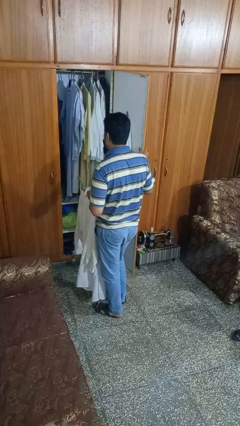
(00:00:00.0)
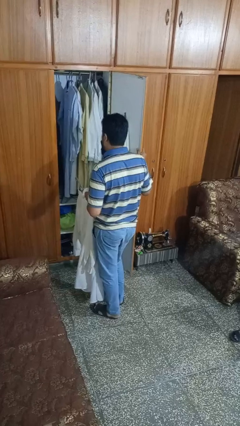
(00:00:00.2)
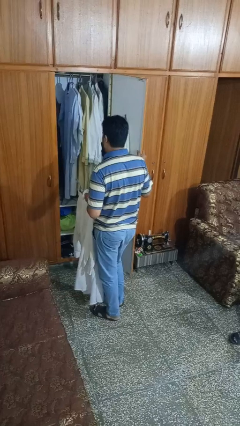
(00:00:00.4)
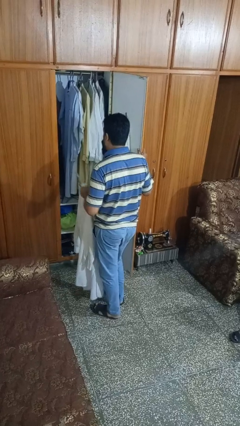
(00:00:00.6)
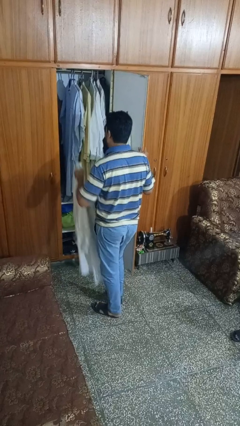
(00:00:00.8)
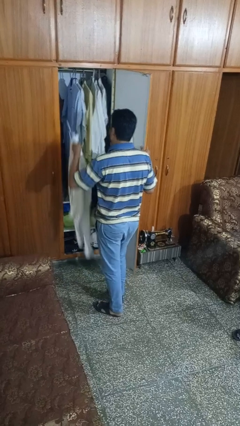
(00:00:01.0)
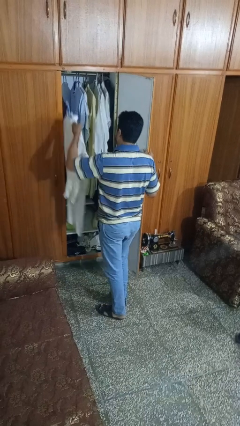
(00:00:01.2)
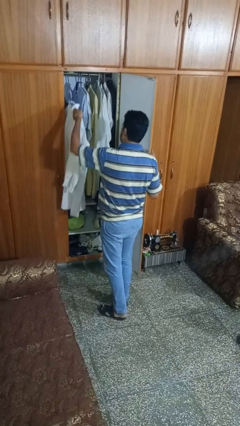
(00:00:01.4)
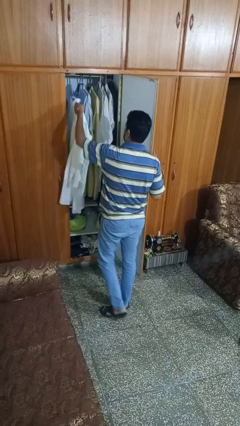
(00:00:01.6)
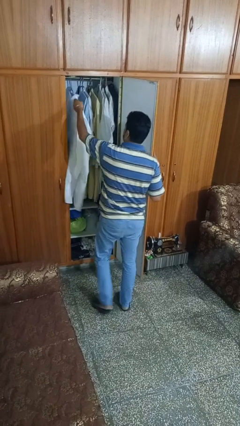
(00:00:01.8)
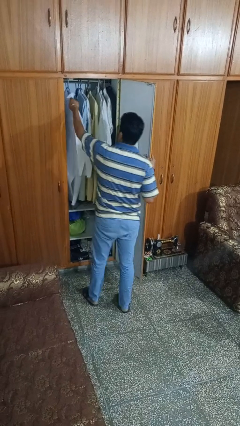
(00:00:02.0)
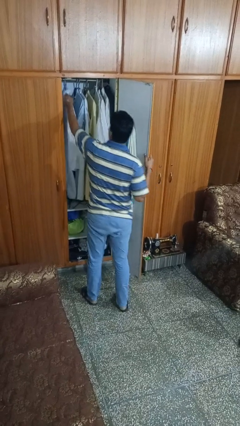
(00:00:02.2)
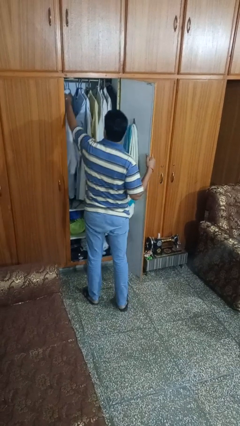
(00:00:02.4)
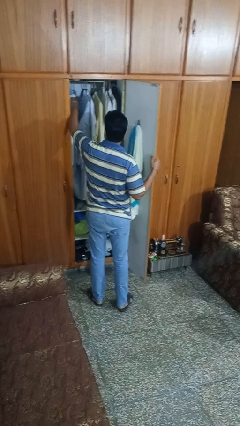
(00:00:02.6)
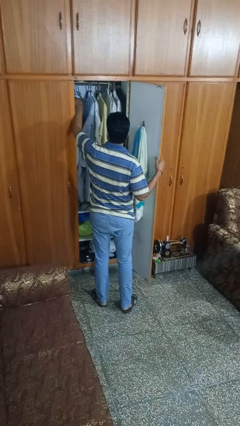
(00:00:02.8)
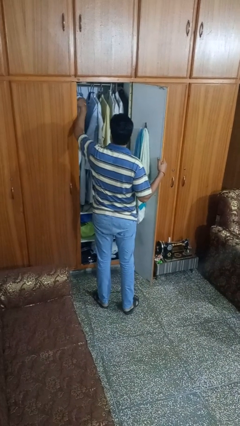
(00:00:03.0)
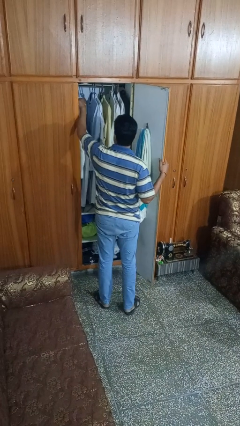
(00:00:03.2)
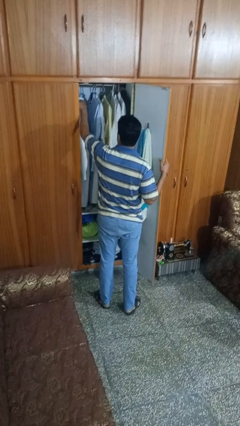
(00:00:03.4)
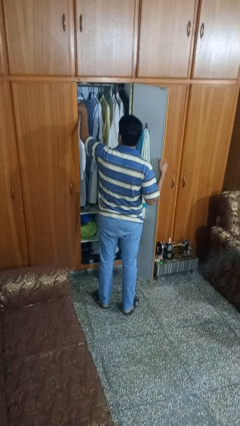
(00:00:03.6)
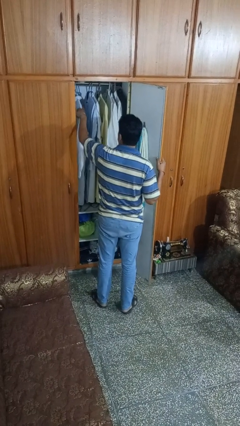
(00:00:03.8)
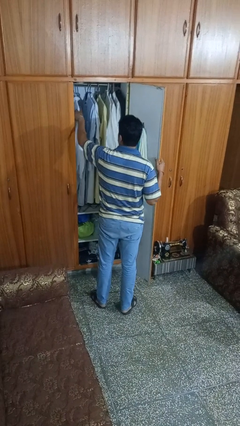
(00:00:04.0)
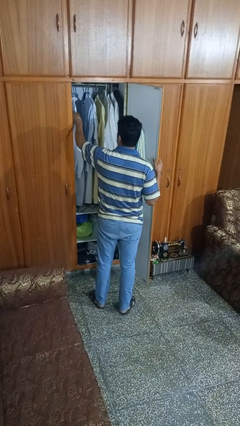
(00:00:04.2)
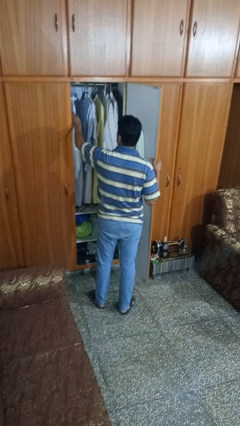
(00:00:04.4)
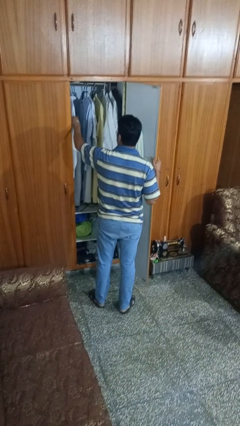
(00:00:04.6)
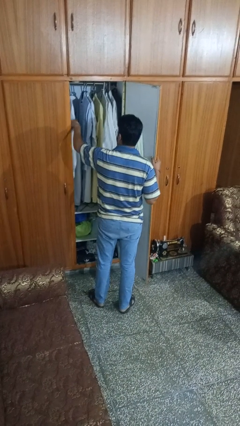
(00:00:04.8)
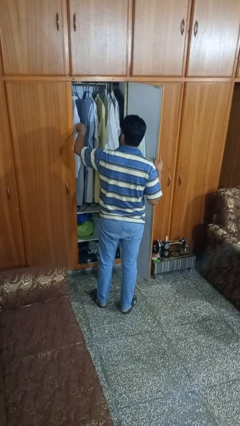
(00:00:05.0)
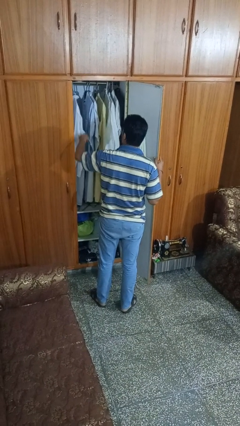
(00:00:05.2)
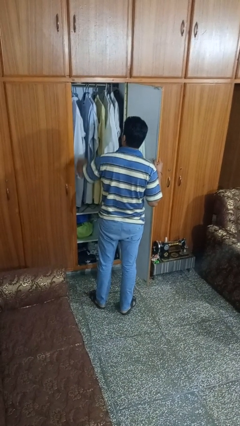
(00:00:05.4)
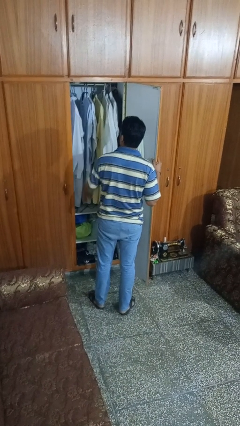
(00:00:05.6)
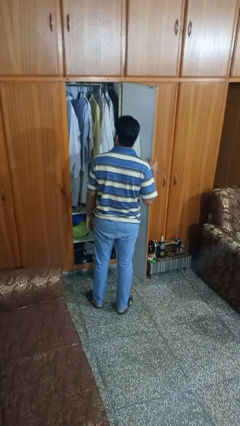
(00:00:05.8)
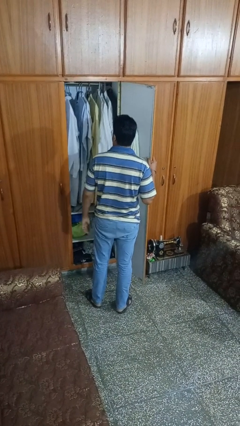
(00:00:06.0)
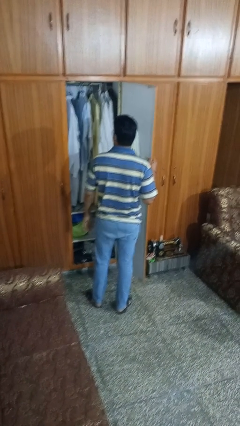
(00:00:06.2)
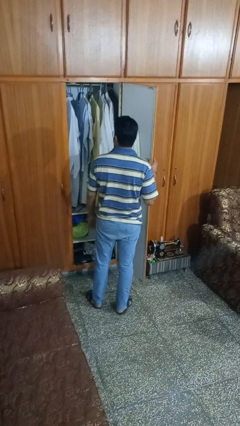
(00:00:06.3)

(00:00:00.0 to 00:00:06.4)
person puts clothes into dresser

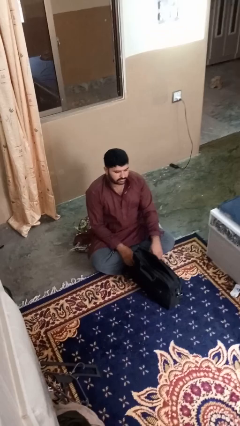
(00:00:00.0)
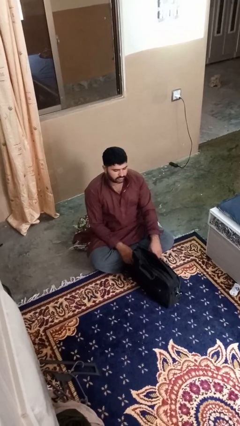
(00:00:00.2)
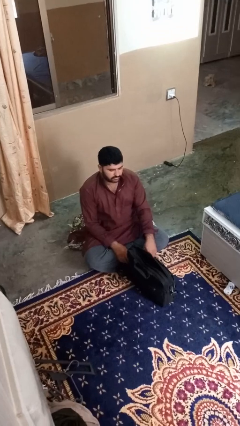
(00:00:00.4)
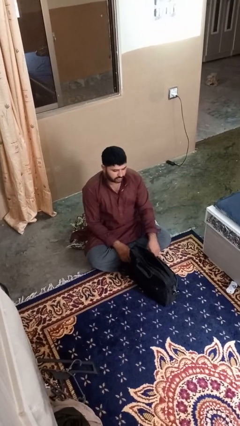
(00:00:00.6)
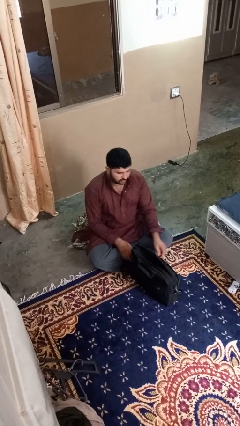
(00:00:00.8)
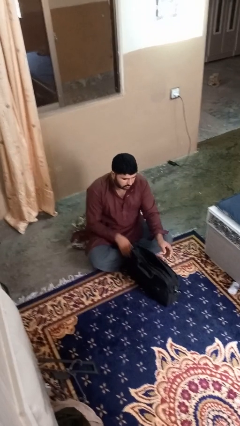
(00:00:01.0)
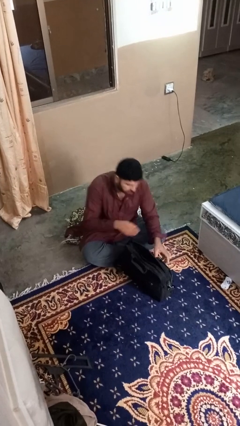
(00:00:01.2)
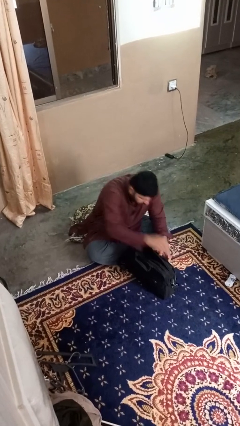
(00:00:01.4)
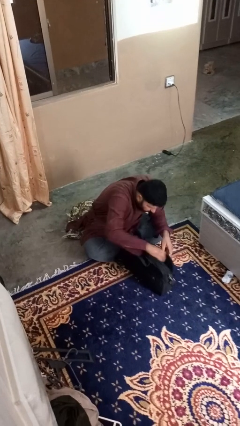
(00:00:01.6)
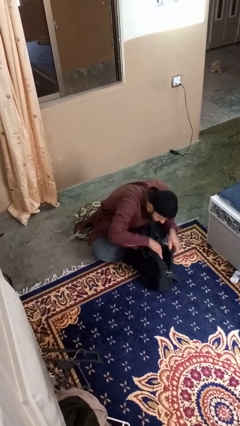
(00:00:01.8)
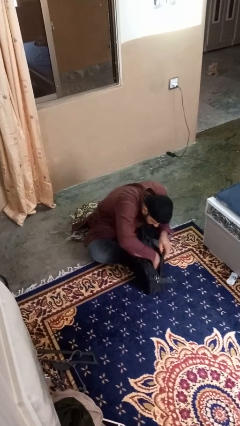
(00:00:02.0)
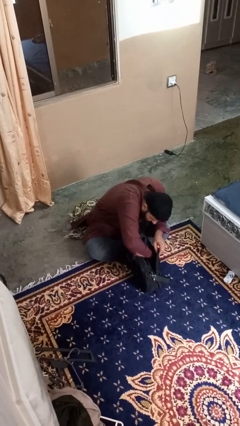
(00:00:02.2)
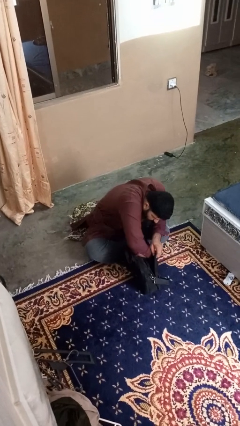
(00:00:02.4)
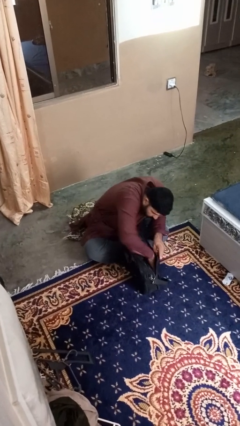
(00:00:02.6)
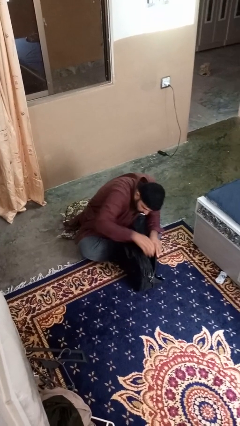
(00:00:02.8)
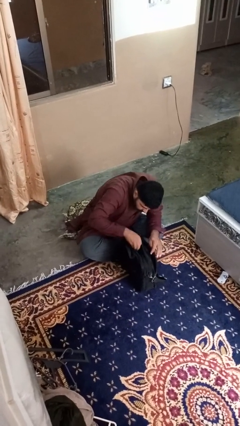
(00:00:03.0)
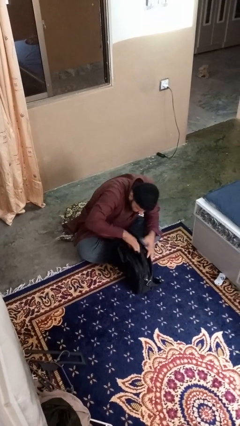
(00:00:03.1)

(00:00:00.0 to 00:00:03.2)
person searches in bag

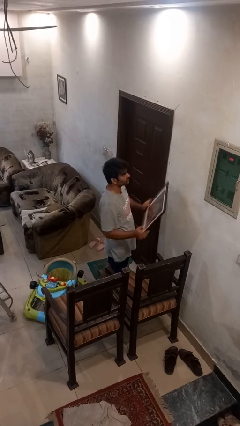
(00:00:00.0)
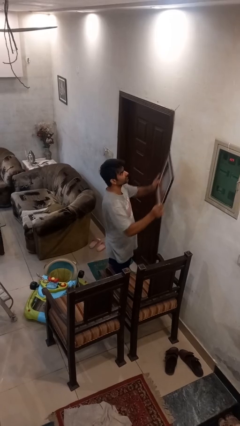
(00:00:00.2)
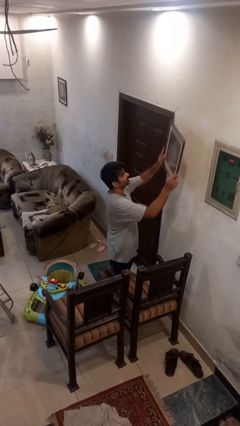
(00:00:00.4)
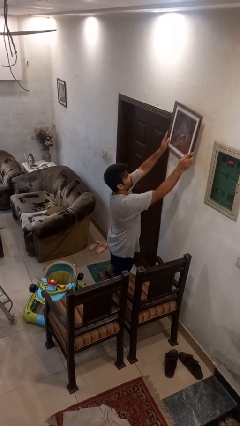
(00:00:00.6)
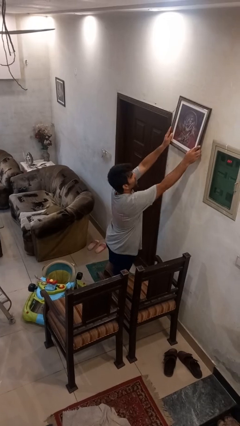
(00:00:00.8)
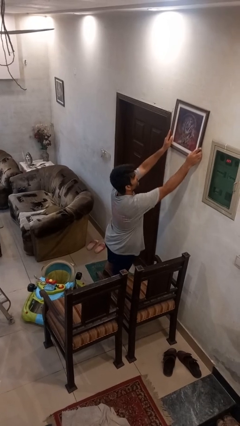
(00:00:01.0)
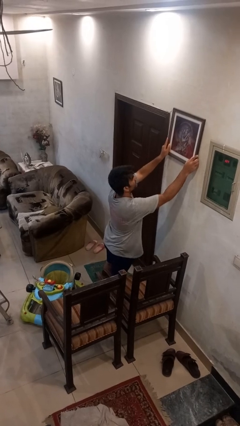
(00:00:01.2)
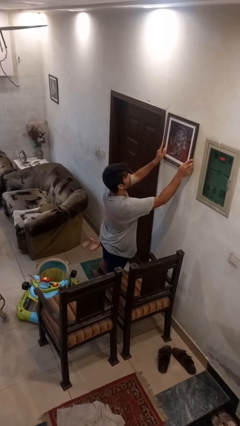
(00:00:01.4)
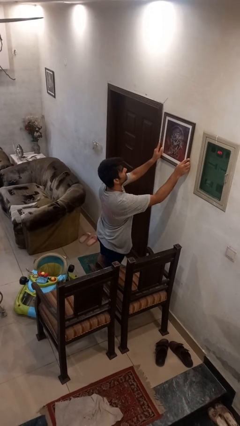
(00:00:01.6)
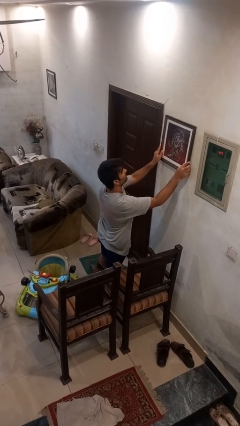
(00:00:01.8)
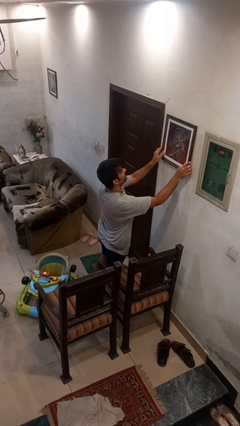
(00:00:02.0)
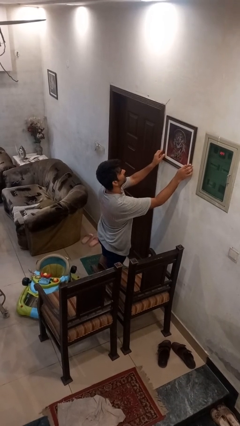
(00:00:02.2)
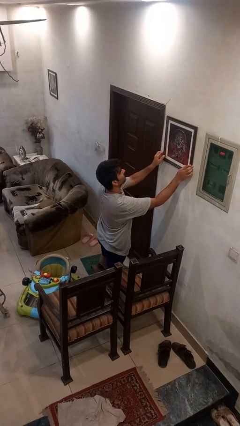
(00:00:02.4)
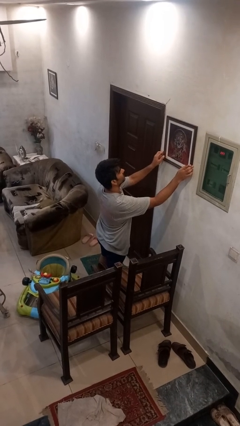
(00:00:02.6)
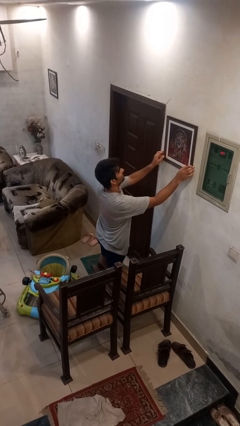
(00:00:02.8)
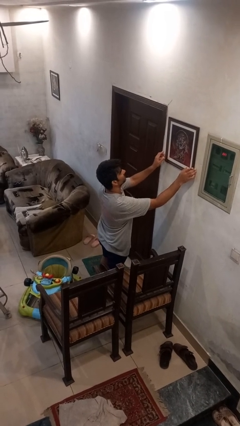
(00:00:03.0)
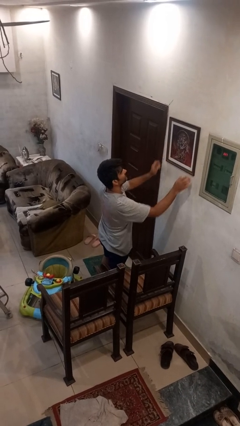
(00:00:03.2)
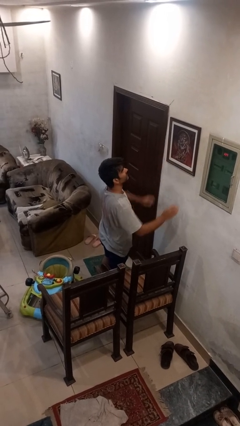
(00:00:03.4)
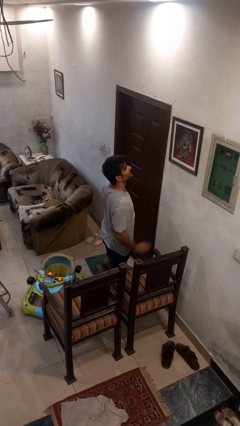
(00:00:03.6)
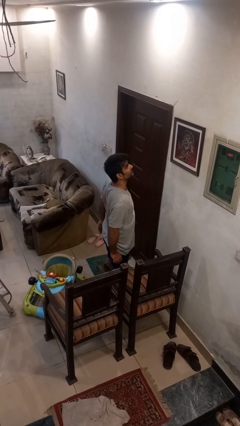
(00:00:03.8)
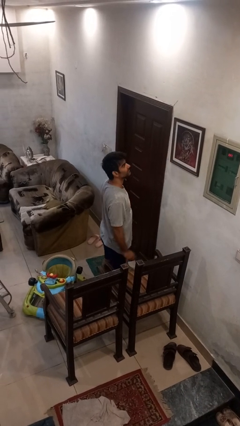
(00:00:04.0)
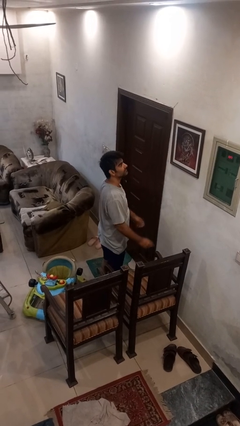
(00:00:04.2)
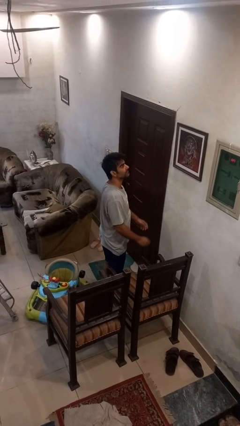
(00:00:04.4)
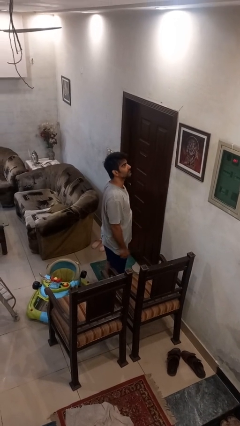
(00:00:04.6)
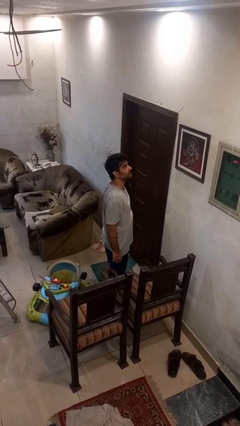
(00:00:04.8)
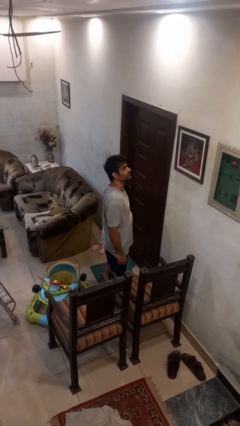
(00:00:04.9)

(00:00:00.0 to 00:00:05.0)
person puts up picture frame

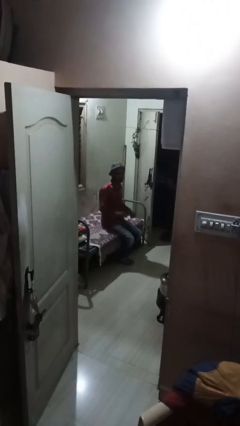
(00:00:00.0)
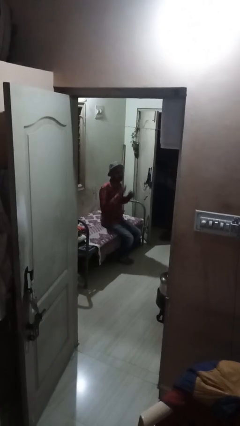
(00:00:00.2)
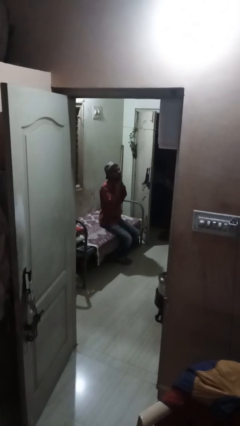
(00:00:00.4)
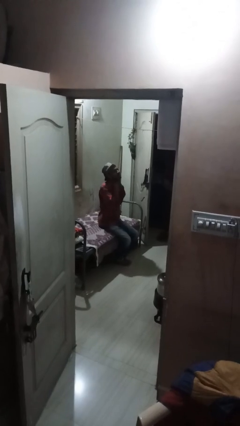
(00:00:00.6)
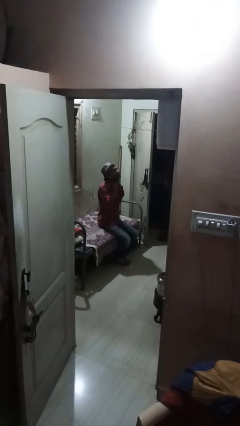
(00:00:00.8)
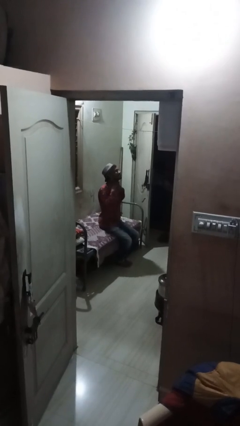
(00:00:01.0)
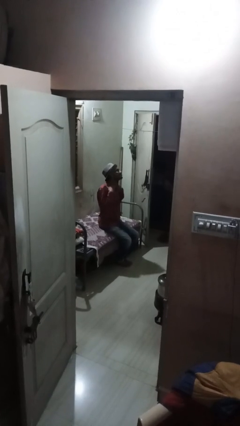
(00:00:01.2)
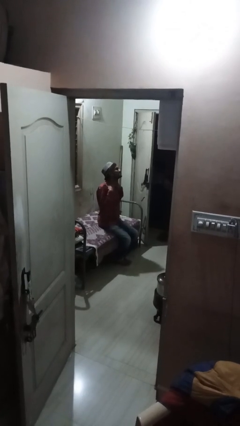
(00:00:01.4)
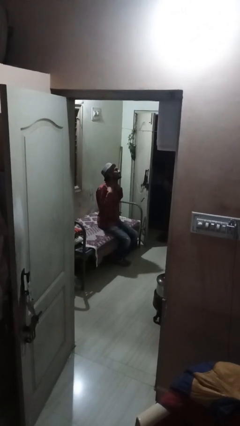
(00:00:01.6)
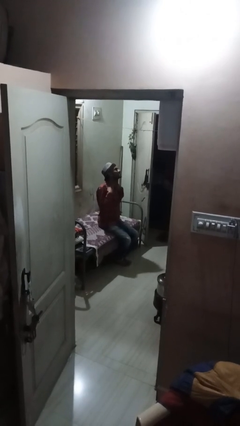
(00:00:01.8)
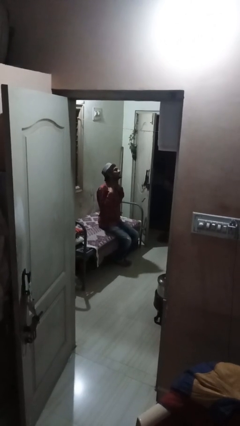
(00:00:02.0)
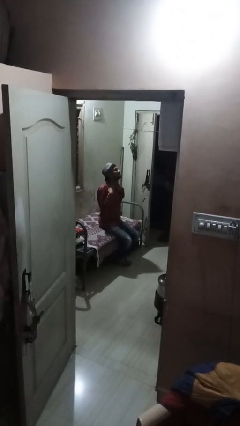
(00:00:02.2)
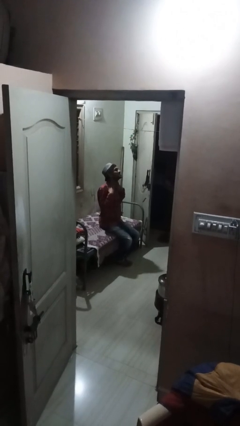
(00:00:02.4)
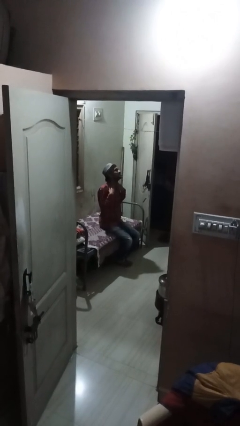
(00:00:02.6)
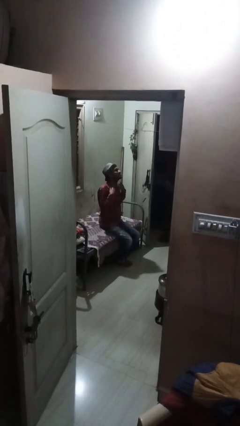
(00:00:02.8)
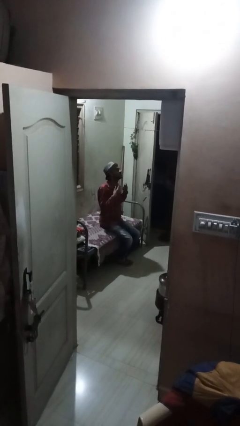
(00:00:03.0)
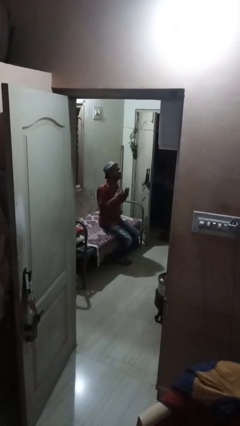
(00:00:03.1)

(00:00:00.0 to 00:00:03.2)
person rubs neck
